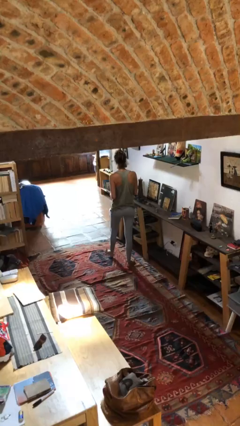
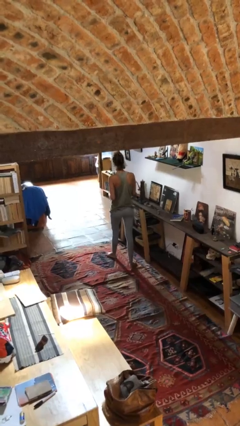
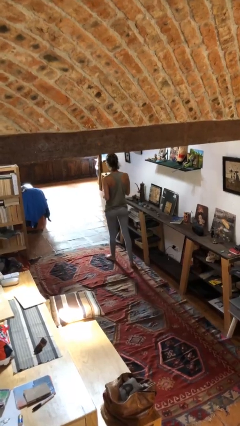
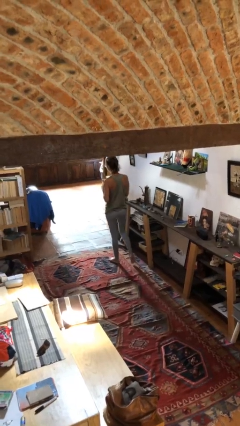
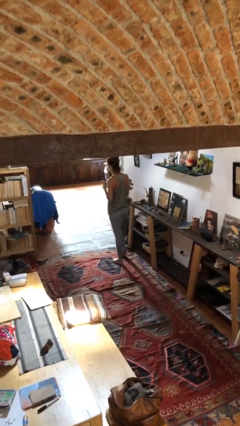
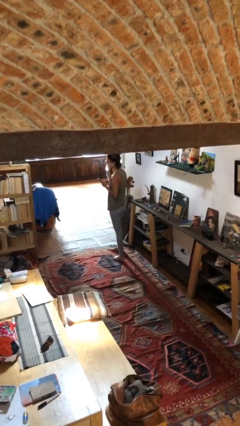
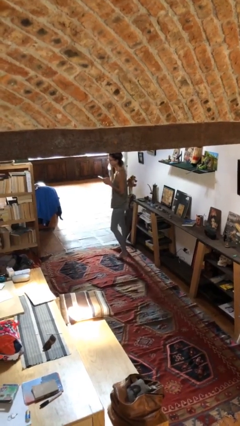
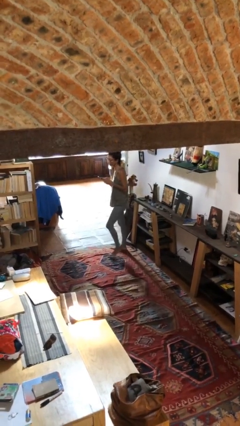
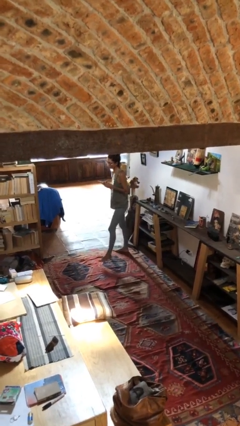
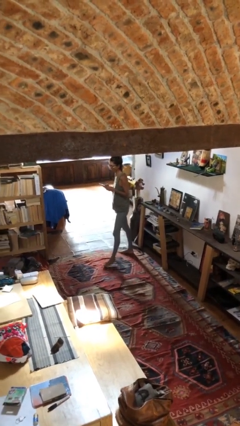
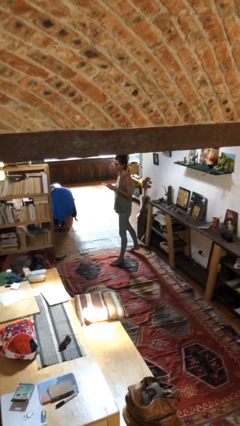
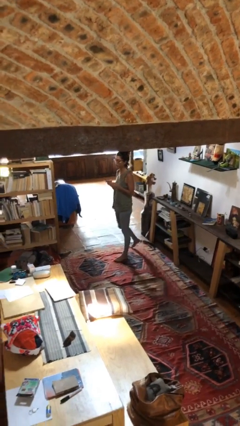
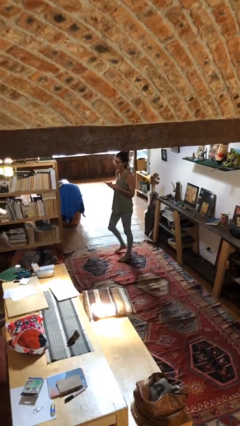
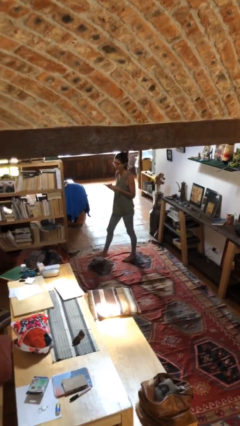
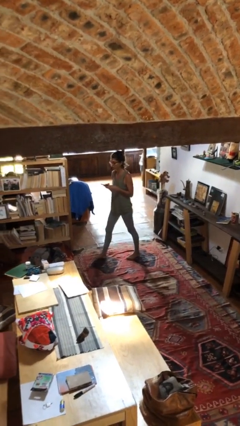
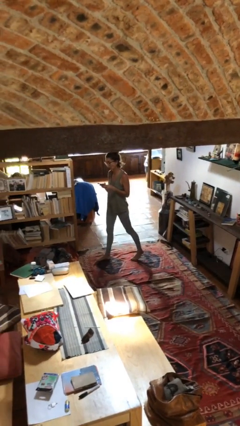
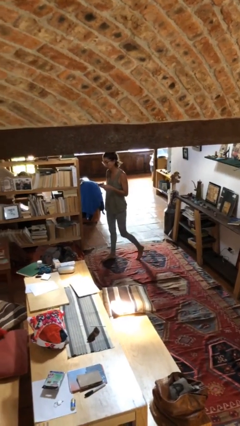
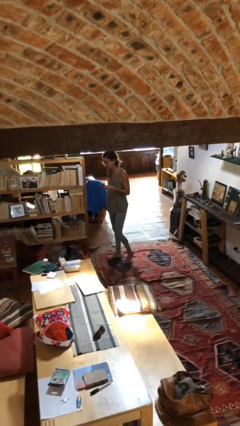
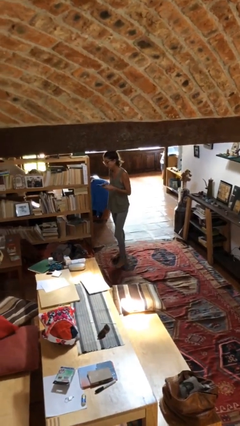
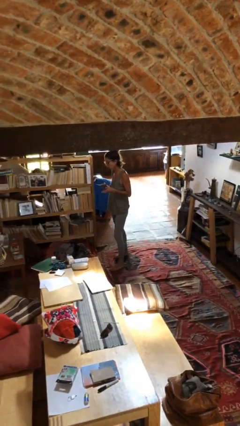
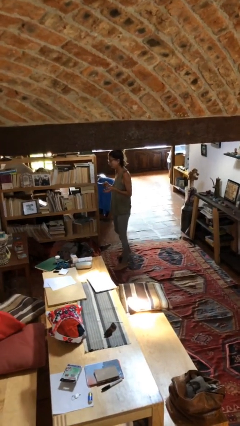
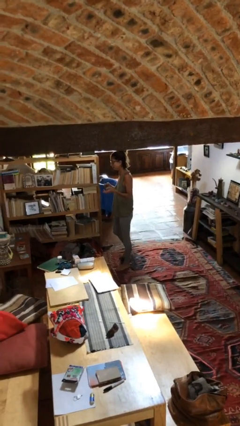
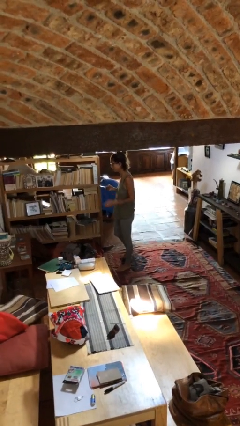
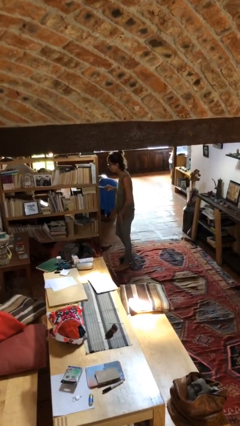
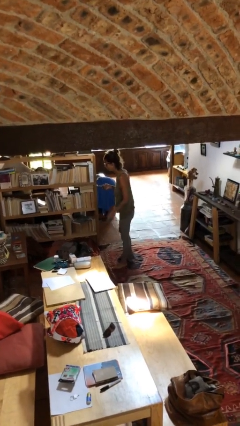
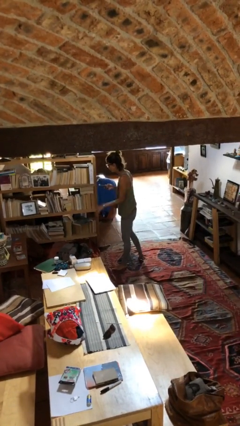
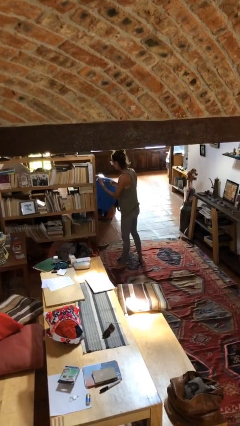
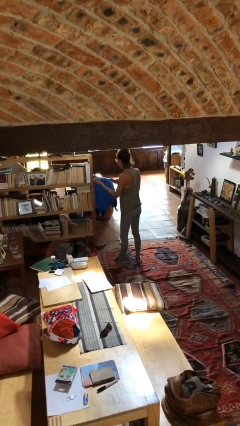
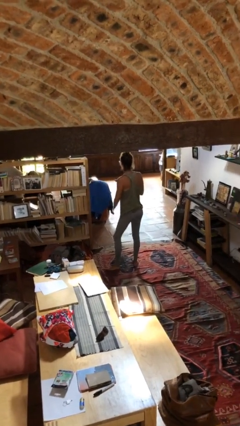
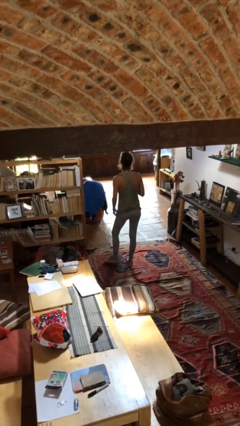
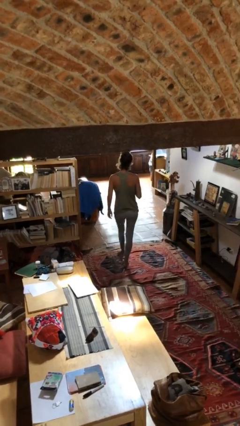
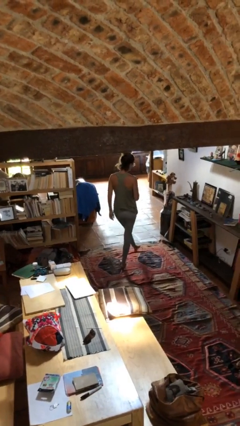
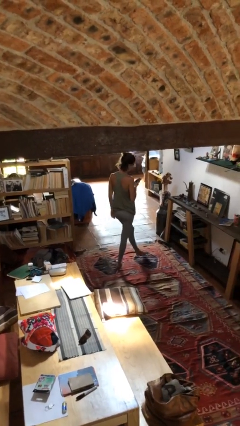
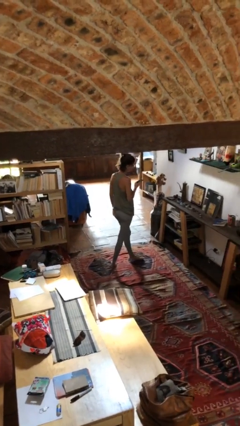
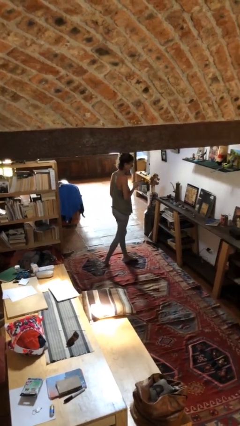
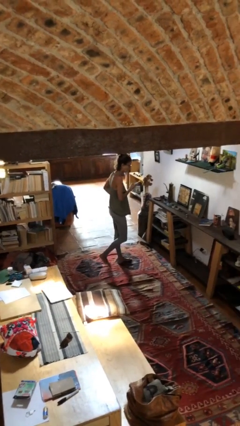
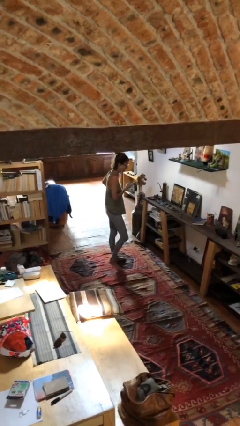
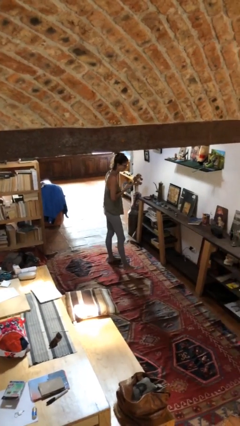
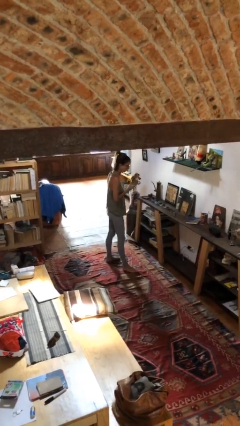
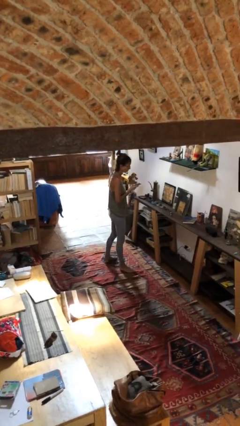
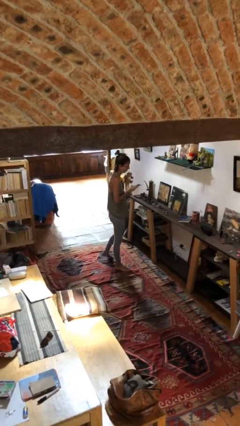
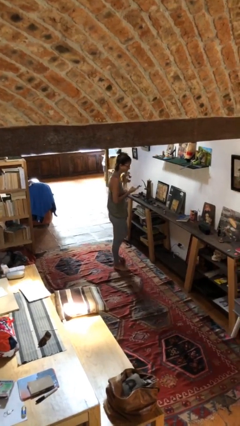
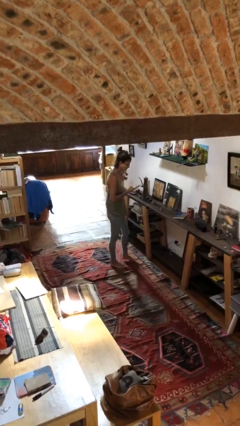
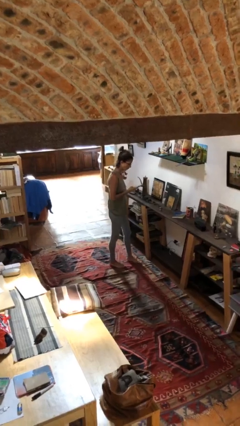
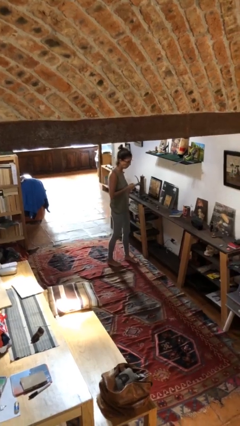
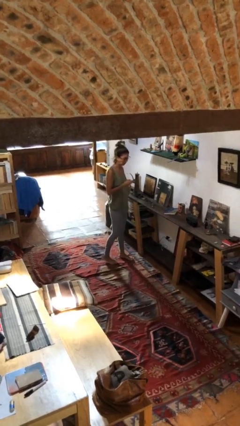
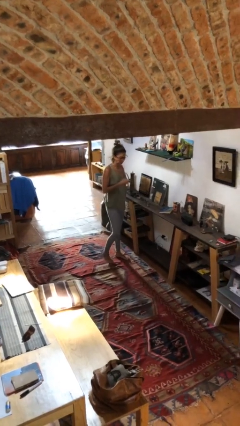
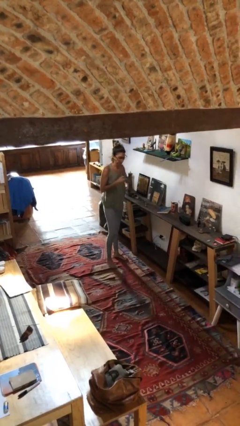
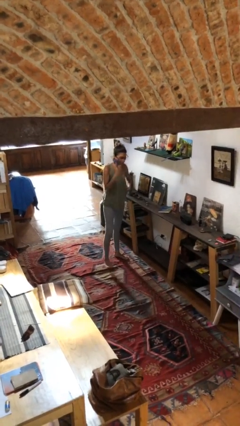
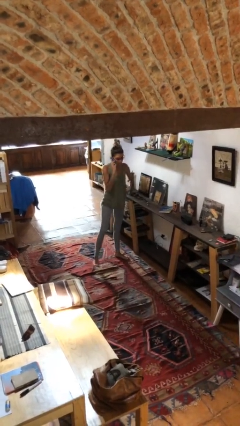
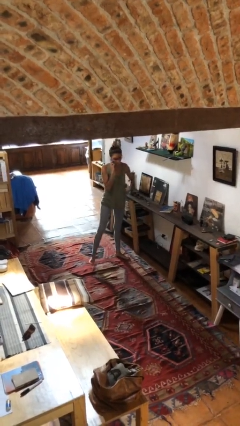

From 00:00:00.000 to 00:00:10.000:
person texts on phone

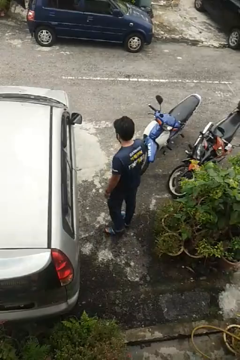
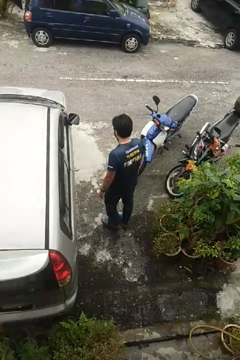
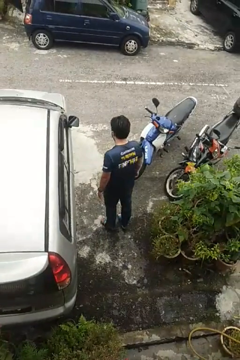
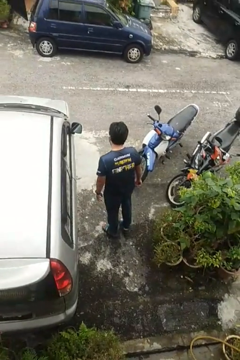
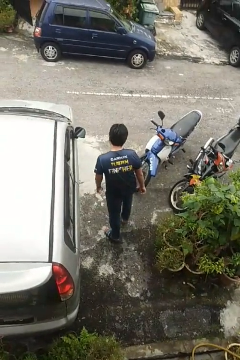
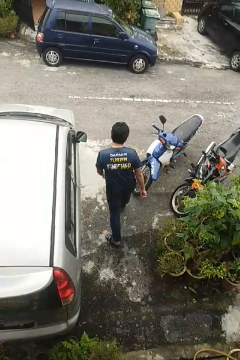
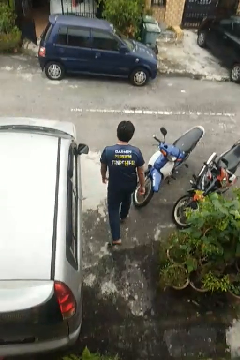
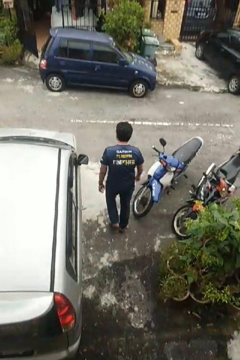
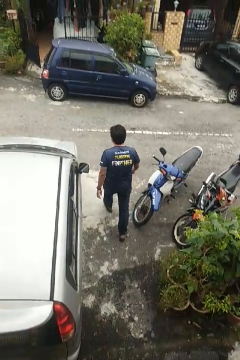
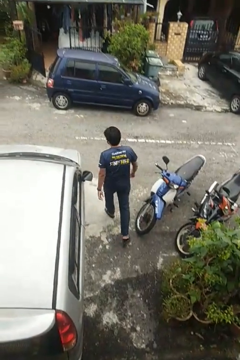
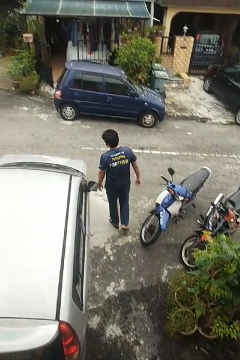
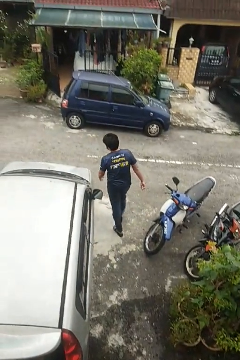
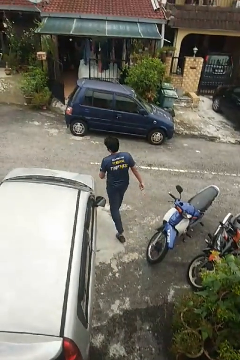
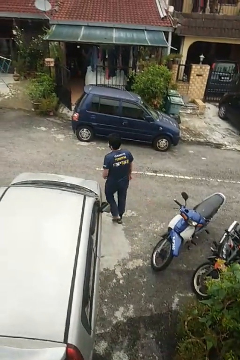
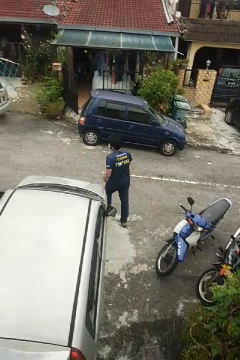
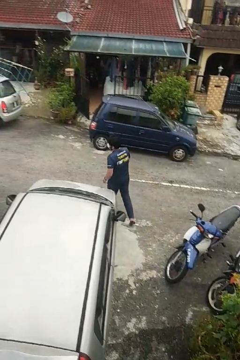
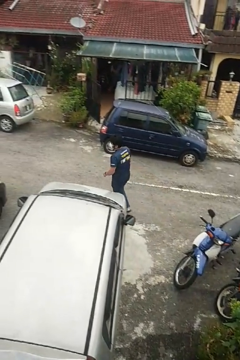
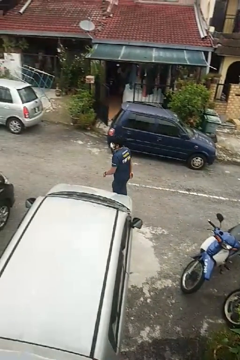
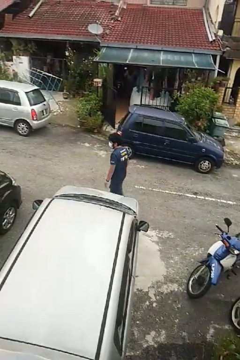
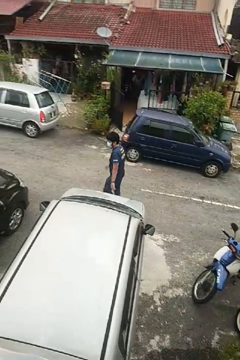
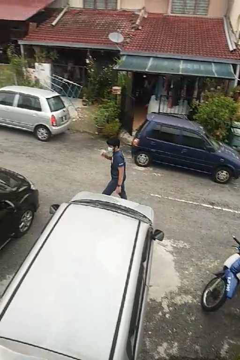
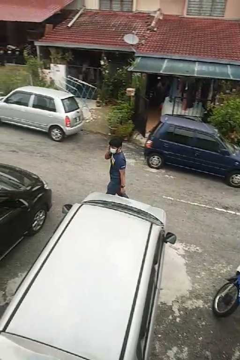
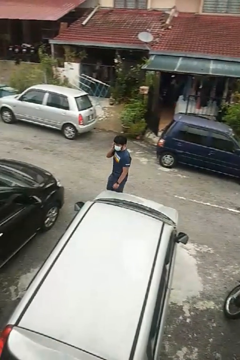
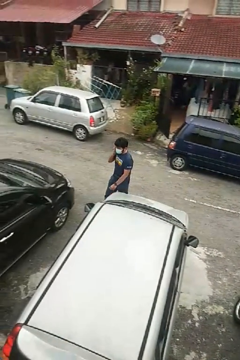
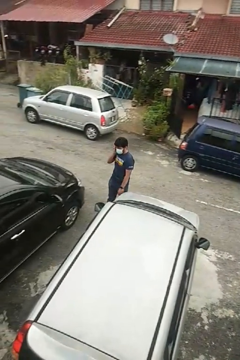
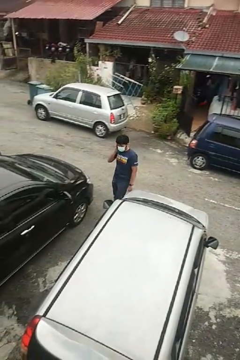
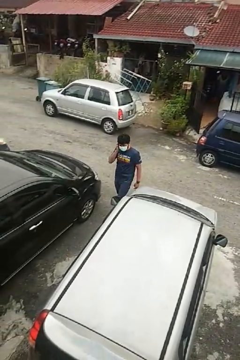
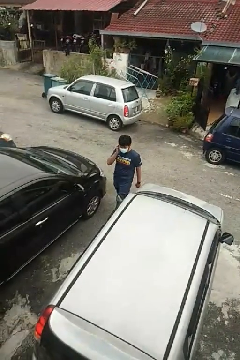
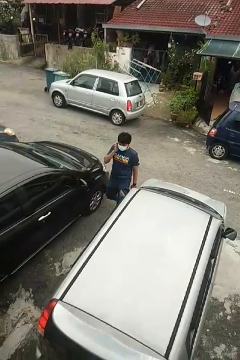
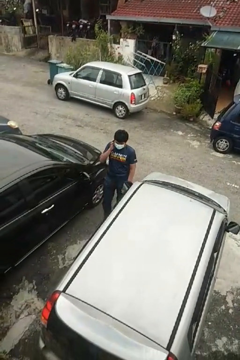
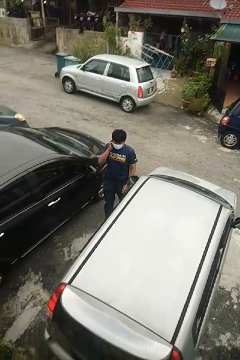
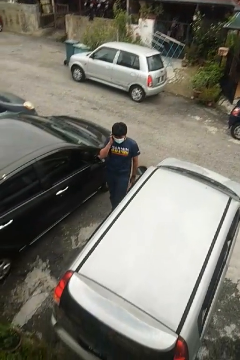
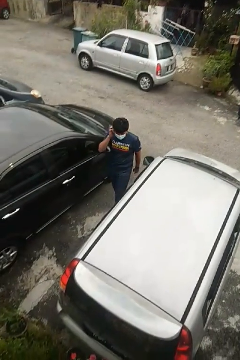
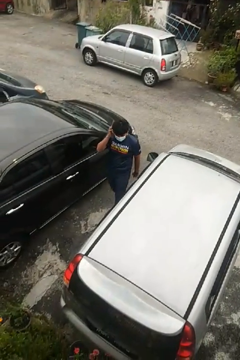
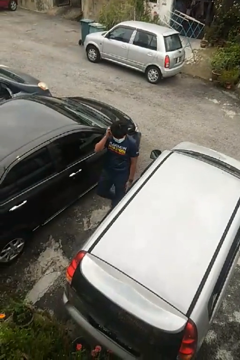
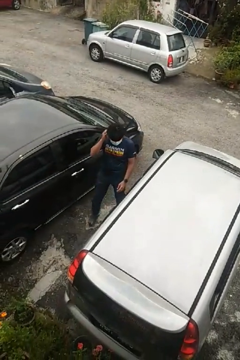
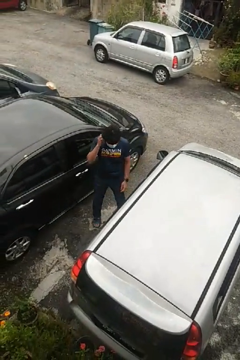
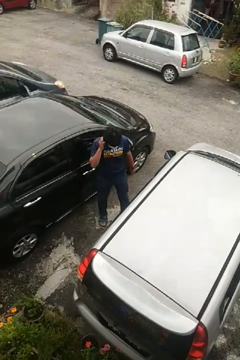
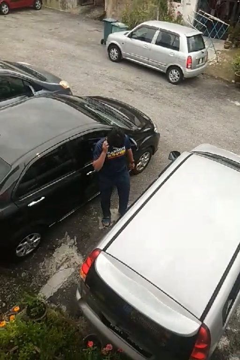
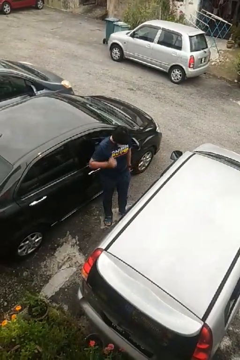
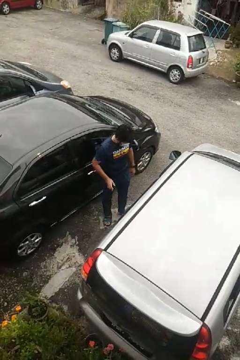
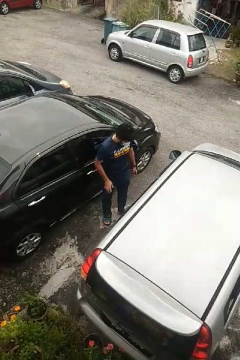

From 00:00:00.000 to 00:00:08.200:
person walks around car

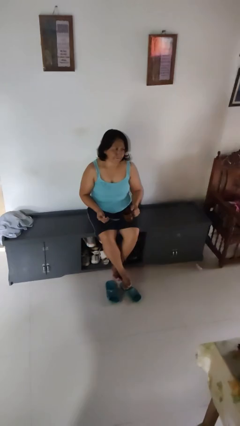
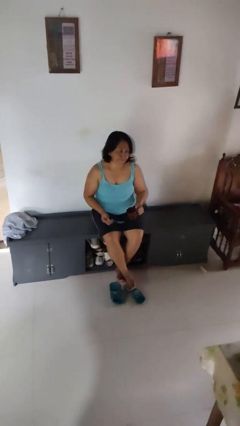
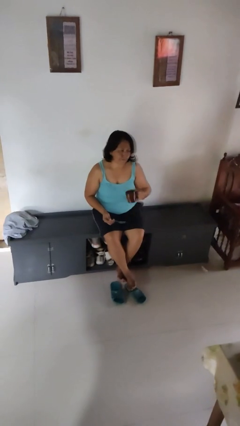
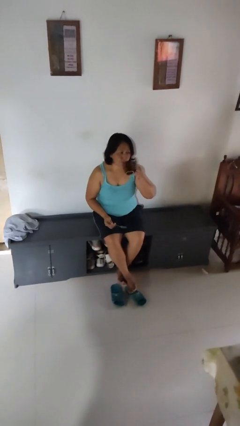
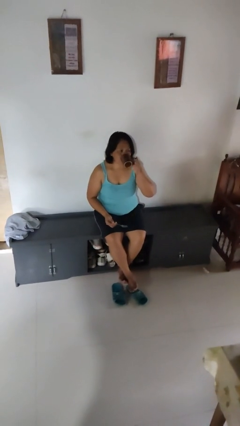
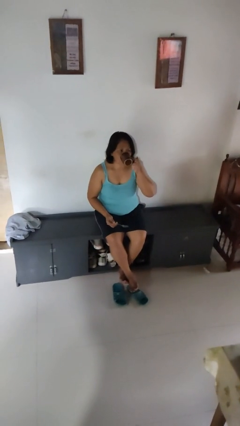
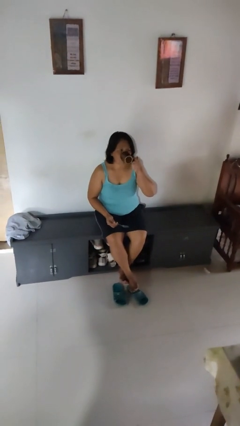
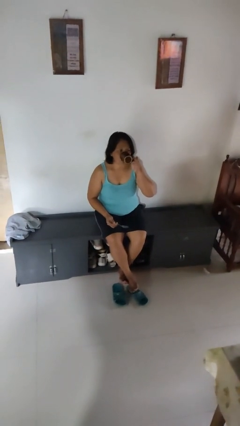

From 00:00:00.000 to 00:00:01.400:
person drinks from mug
